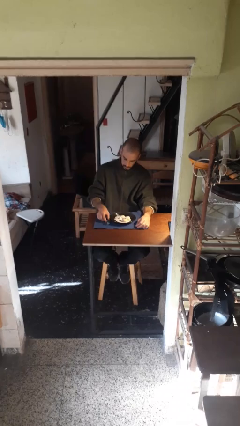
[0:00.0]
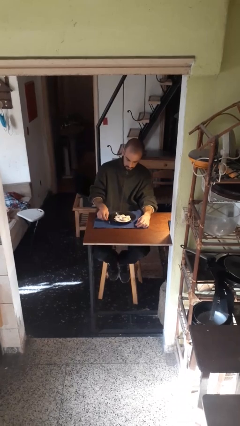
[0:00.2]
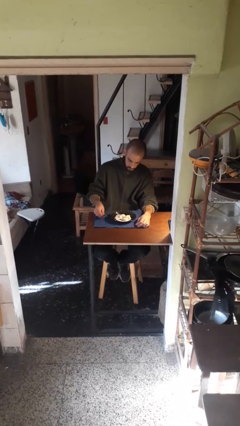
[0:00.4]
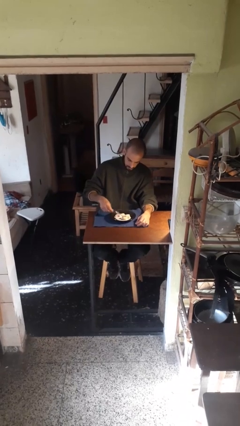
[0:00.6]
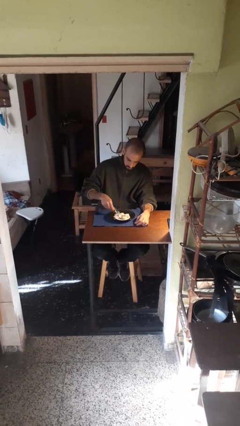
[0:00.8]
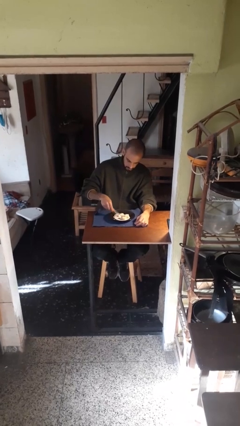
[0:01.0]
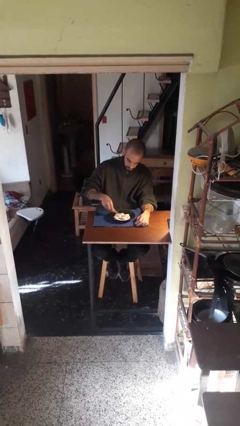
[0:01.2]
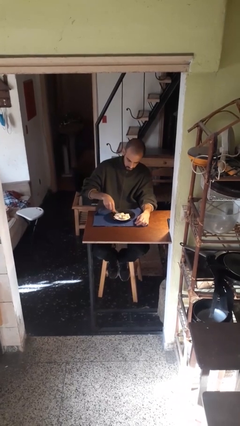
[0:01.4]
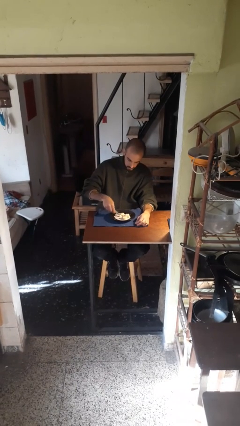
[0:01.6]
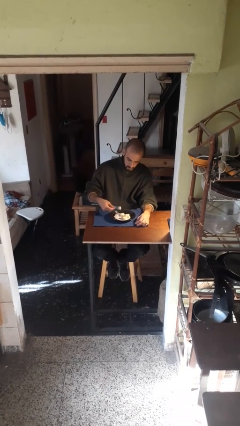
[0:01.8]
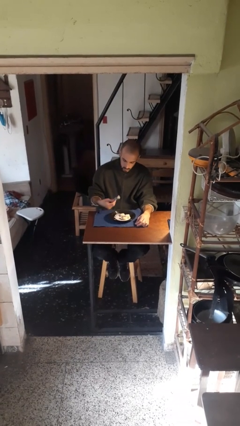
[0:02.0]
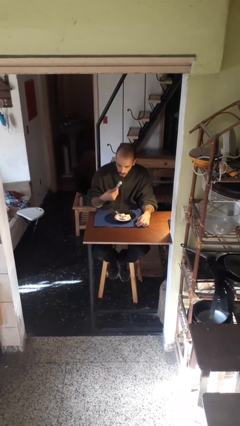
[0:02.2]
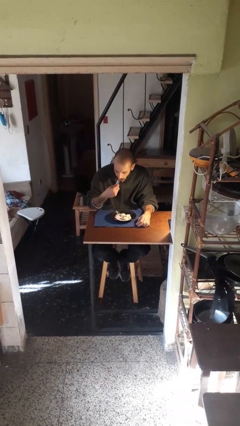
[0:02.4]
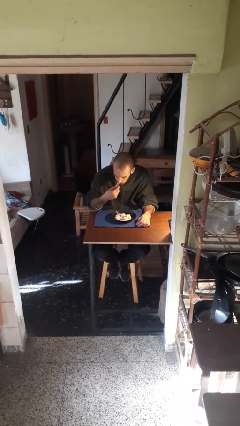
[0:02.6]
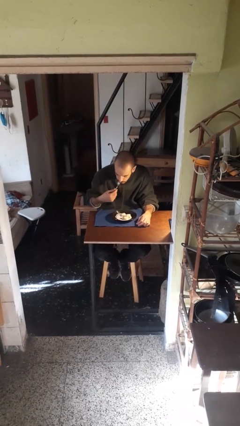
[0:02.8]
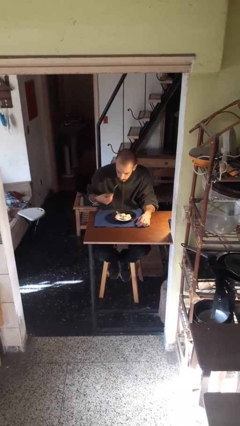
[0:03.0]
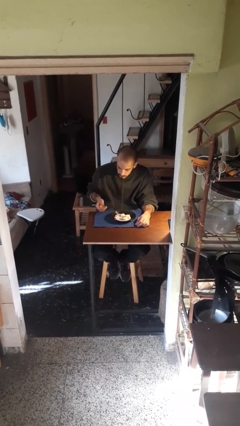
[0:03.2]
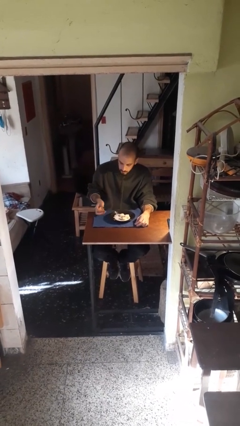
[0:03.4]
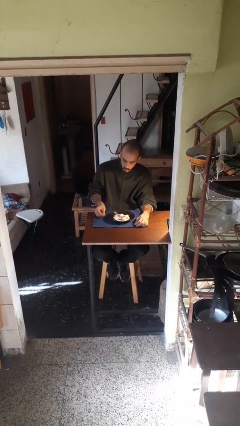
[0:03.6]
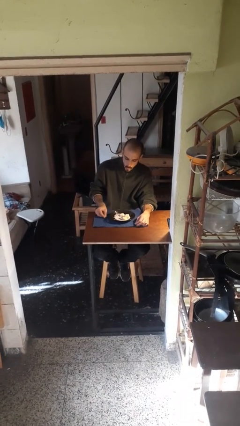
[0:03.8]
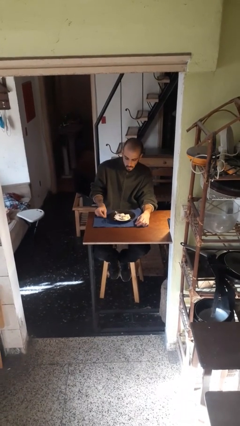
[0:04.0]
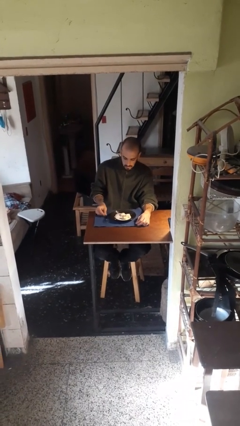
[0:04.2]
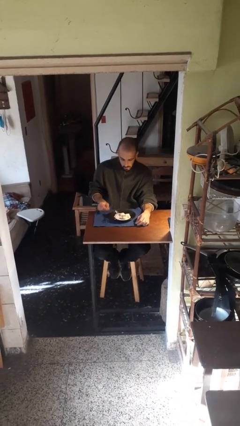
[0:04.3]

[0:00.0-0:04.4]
person eats with utensil

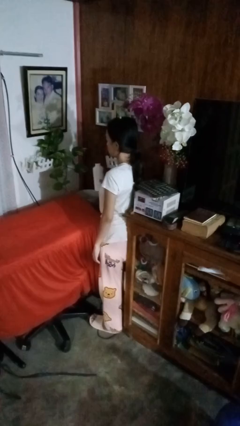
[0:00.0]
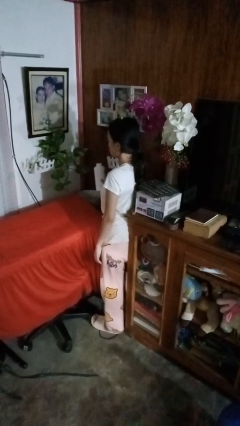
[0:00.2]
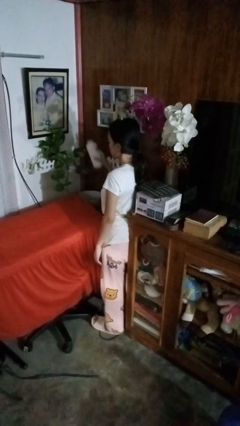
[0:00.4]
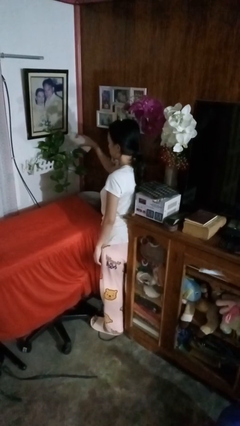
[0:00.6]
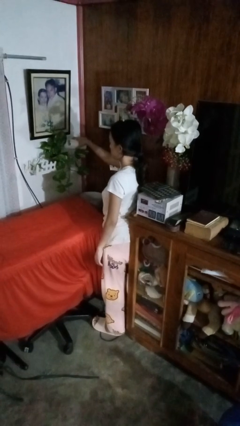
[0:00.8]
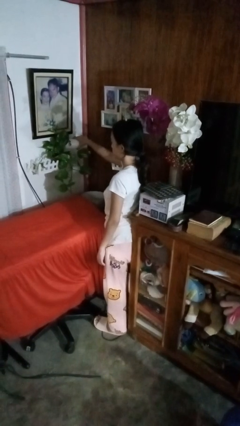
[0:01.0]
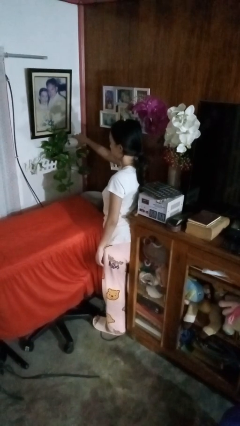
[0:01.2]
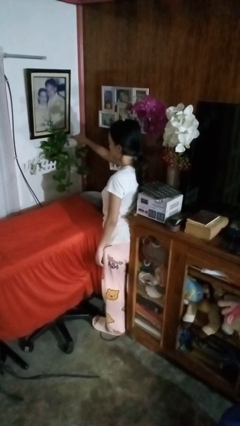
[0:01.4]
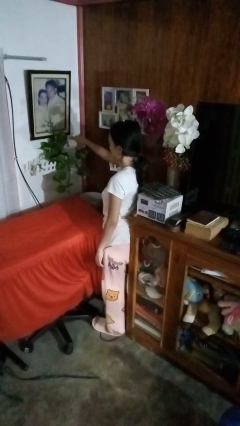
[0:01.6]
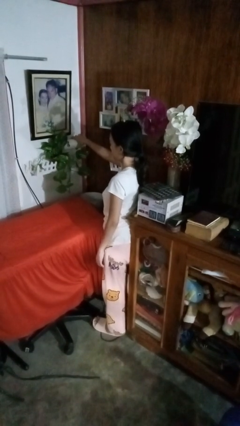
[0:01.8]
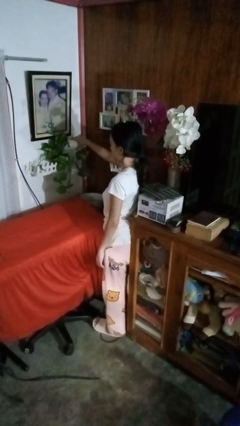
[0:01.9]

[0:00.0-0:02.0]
person waters houseplant

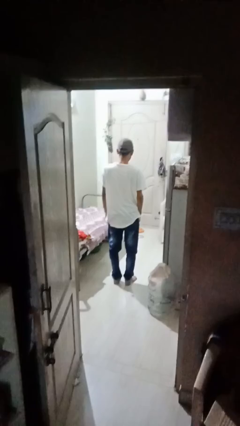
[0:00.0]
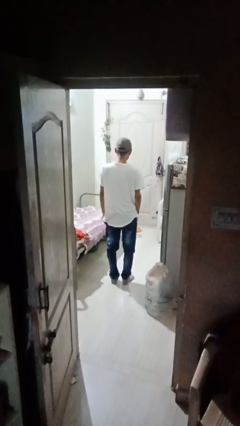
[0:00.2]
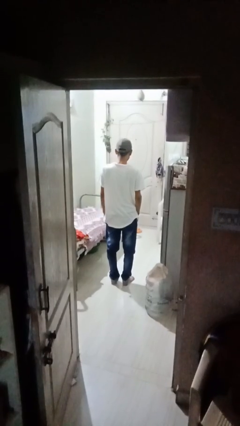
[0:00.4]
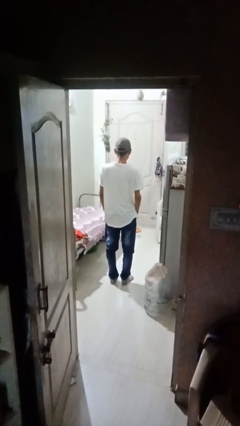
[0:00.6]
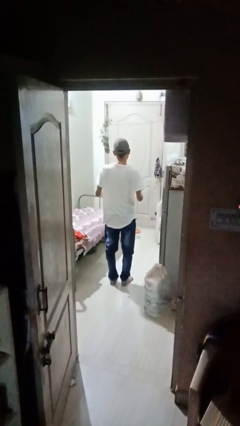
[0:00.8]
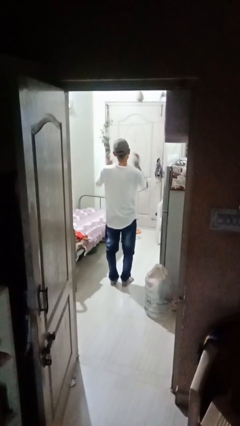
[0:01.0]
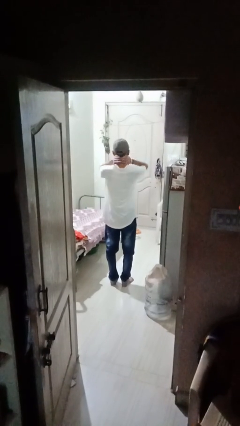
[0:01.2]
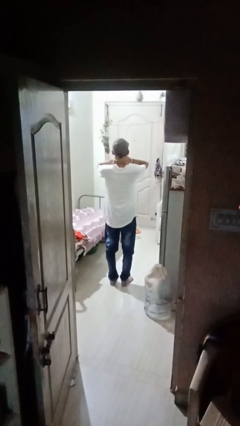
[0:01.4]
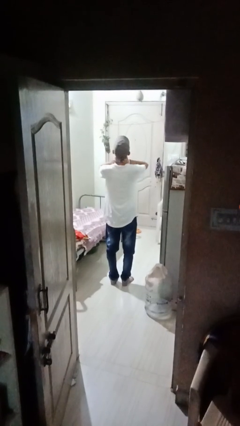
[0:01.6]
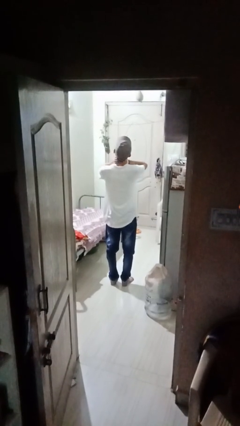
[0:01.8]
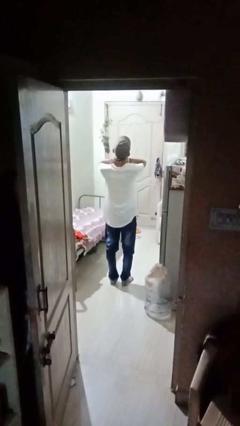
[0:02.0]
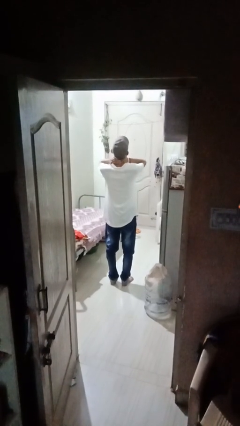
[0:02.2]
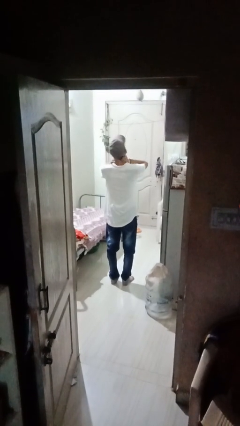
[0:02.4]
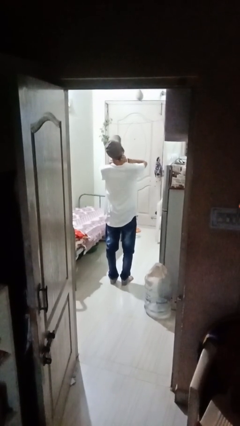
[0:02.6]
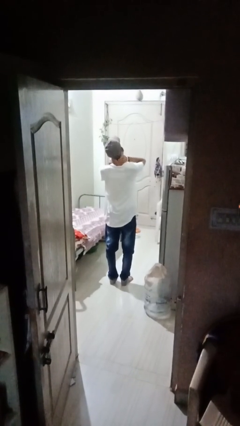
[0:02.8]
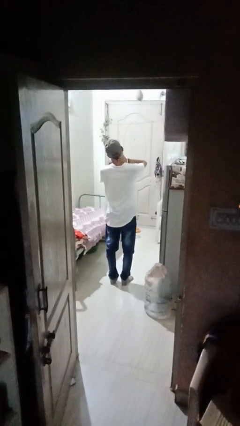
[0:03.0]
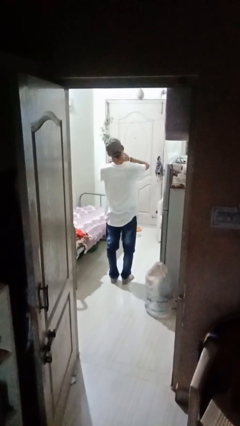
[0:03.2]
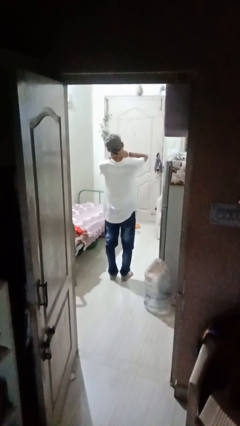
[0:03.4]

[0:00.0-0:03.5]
person rubs neck

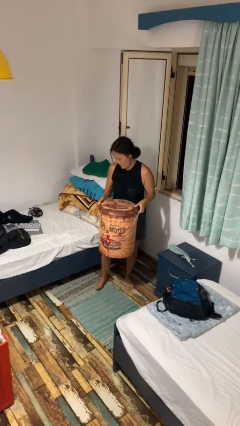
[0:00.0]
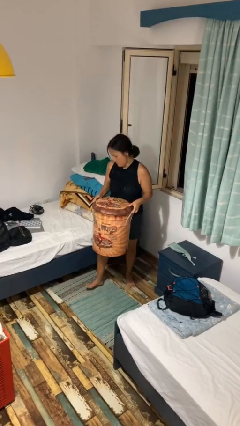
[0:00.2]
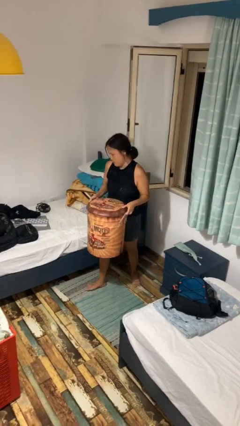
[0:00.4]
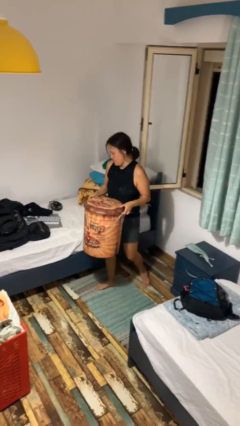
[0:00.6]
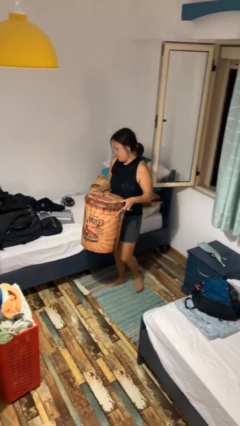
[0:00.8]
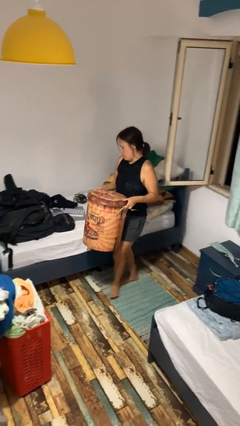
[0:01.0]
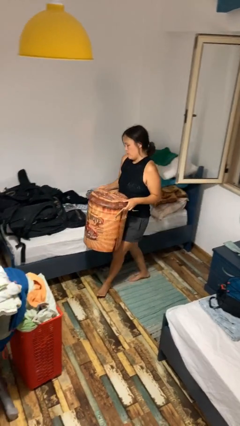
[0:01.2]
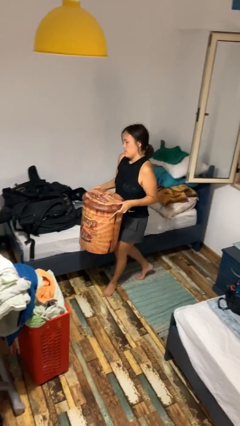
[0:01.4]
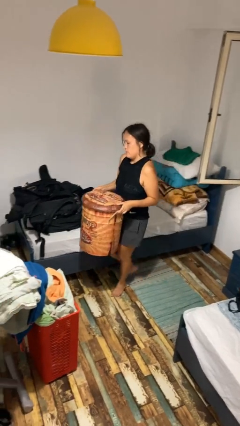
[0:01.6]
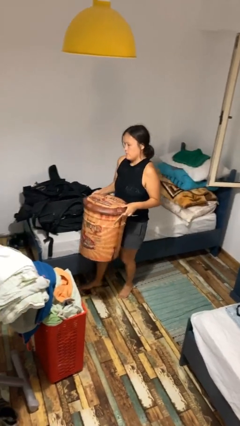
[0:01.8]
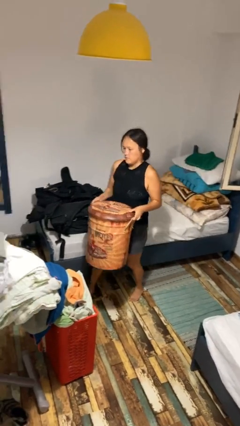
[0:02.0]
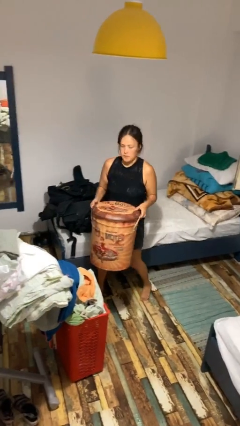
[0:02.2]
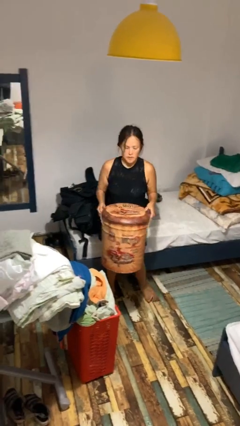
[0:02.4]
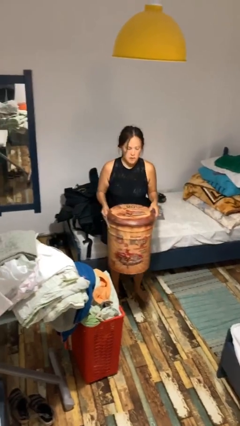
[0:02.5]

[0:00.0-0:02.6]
person carries furniture

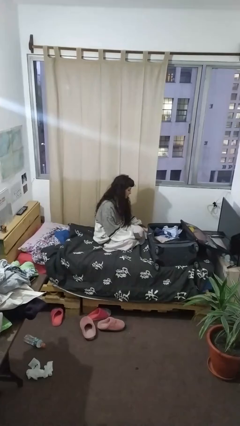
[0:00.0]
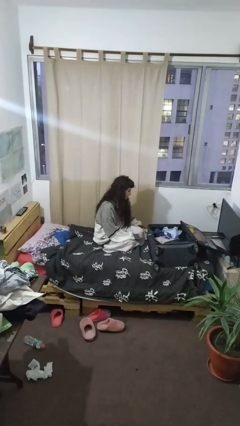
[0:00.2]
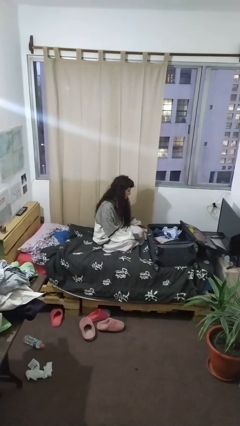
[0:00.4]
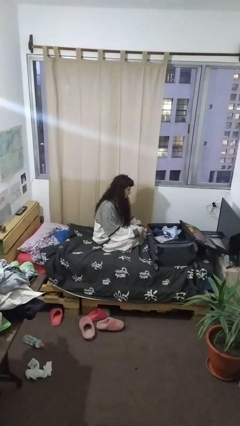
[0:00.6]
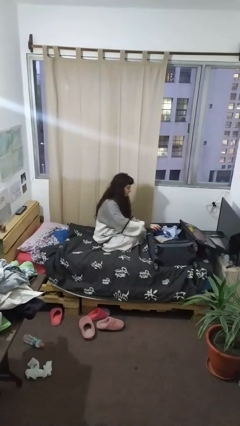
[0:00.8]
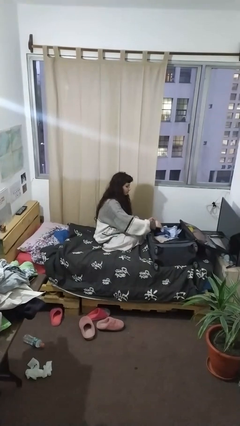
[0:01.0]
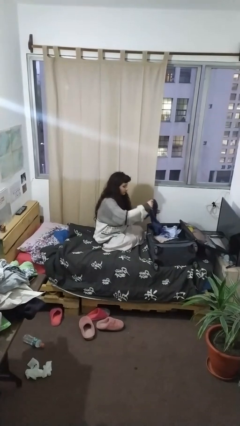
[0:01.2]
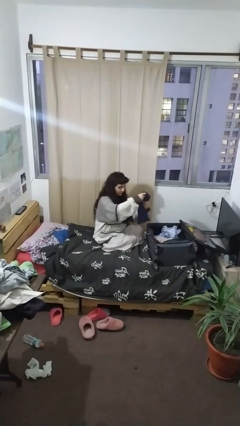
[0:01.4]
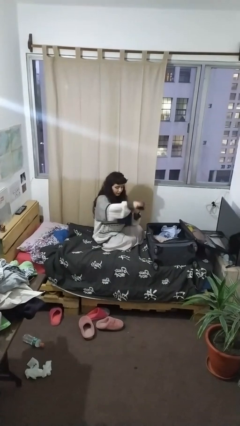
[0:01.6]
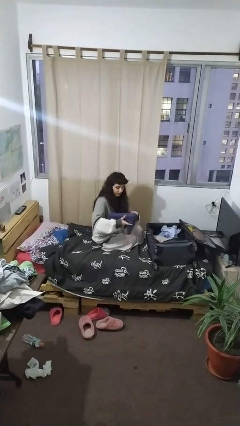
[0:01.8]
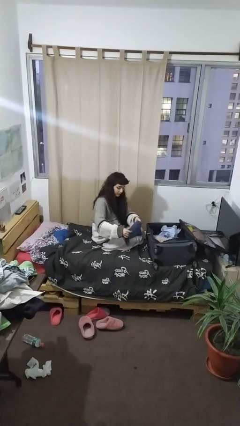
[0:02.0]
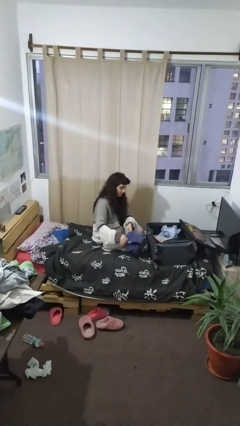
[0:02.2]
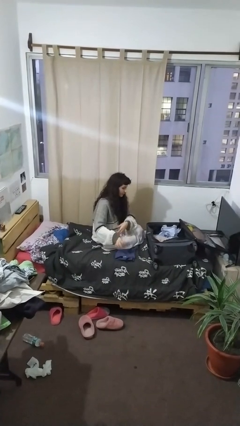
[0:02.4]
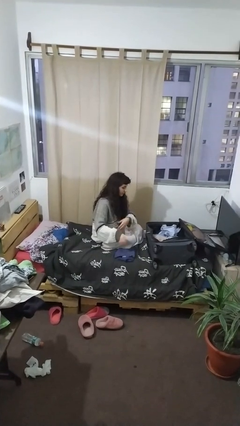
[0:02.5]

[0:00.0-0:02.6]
person unloads clothes from suitcase

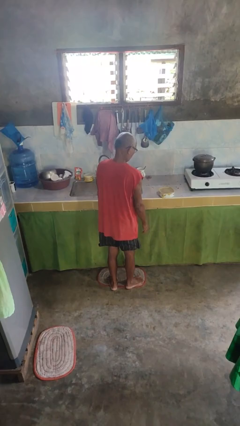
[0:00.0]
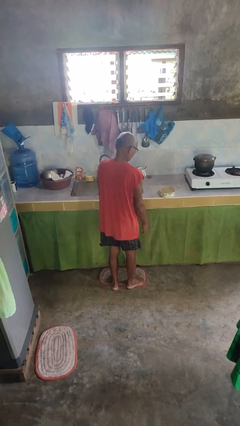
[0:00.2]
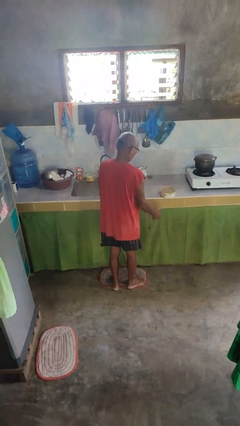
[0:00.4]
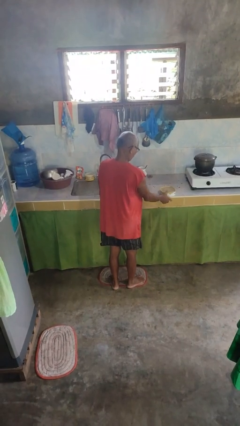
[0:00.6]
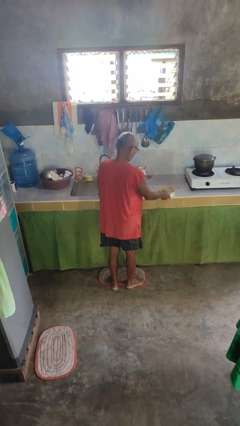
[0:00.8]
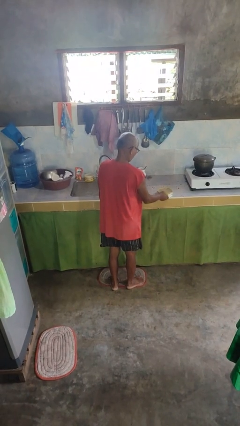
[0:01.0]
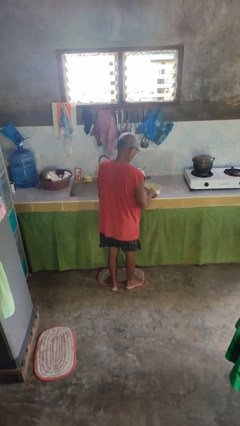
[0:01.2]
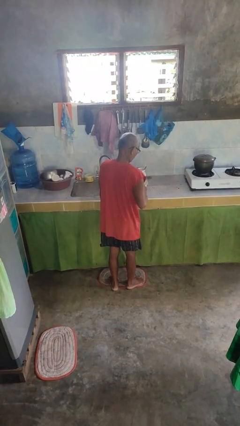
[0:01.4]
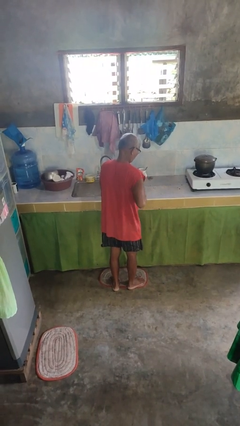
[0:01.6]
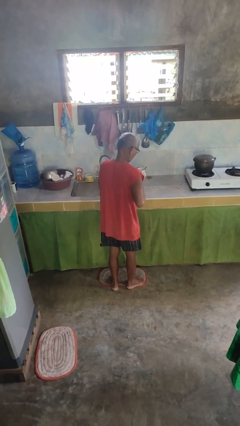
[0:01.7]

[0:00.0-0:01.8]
person picks up object from countertop

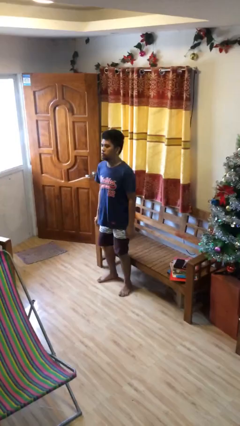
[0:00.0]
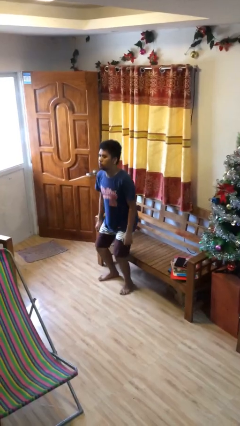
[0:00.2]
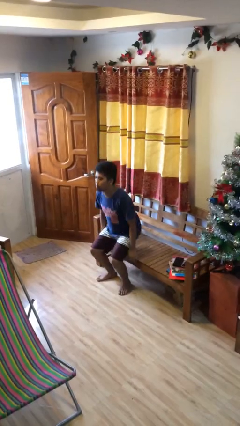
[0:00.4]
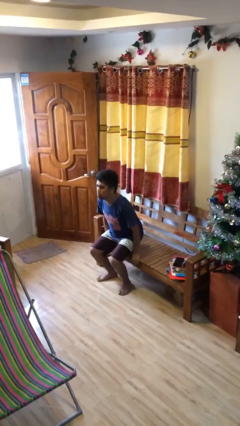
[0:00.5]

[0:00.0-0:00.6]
person sits down
